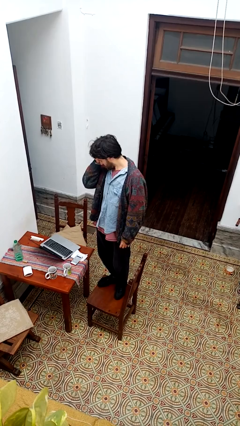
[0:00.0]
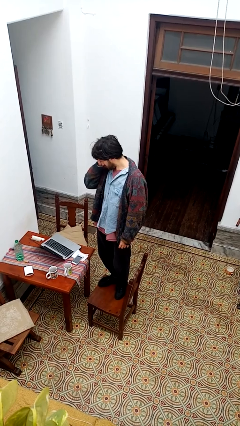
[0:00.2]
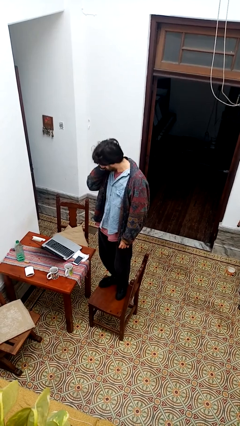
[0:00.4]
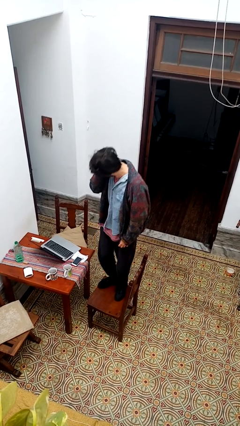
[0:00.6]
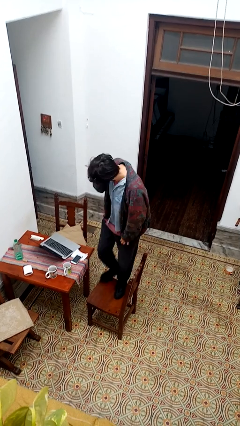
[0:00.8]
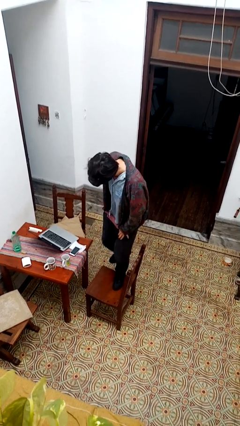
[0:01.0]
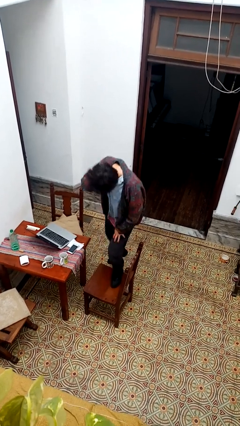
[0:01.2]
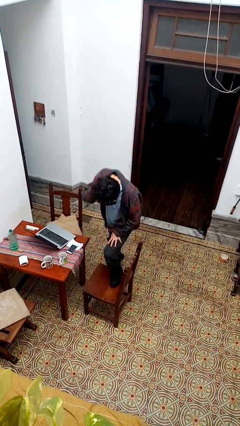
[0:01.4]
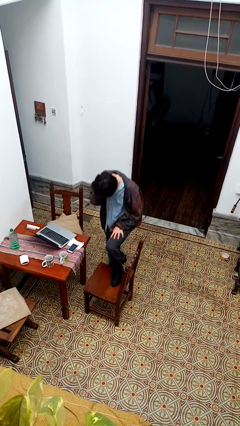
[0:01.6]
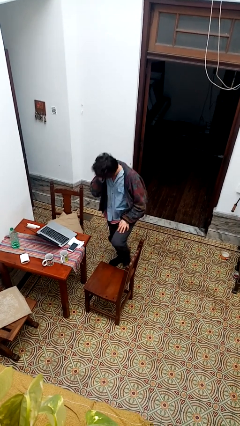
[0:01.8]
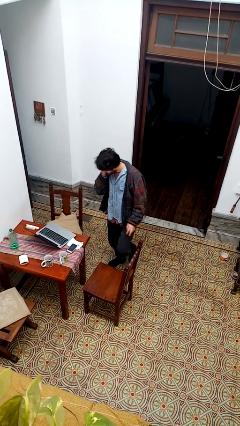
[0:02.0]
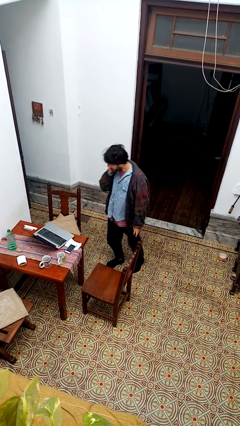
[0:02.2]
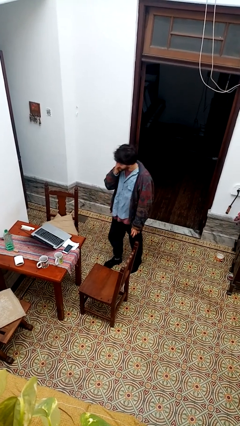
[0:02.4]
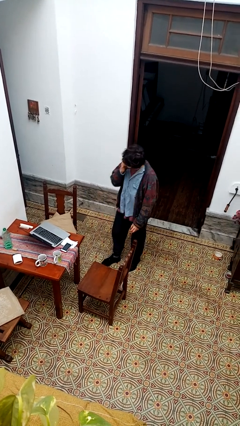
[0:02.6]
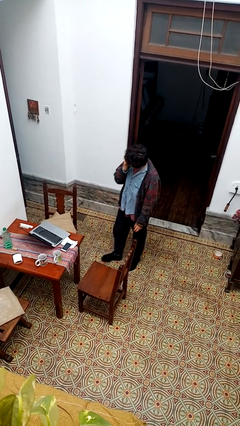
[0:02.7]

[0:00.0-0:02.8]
person climbs off chair

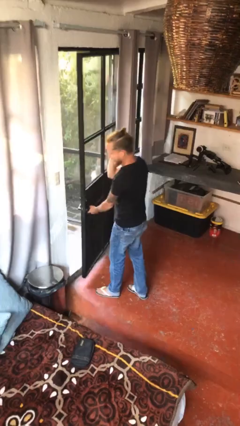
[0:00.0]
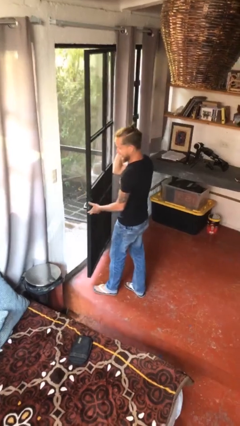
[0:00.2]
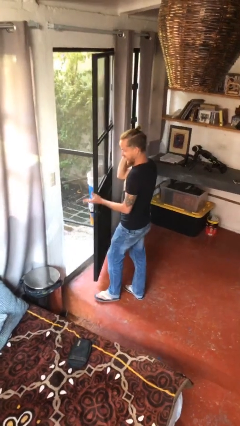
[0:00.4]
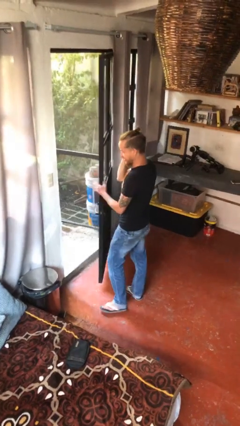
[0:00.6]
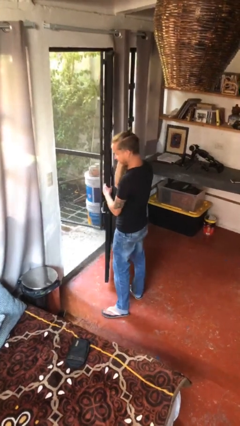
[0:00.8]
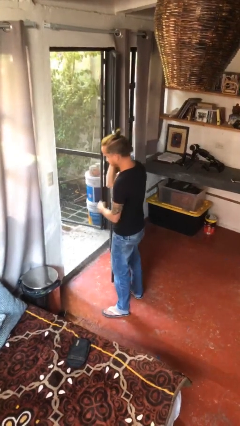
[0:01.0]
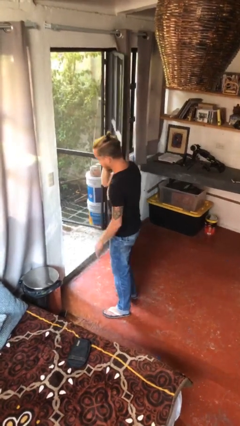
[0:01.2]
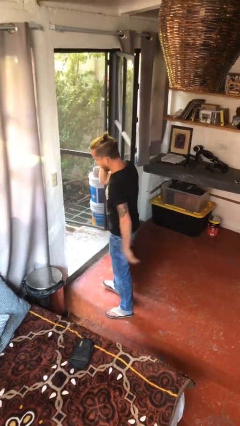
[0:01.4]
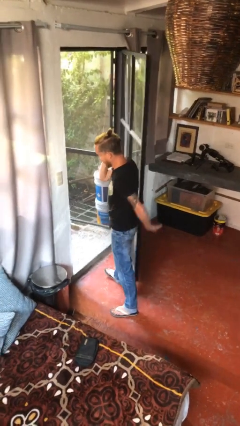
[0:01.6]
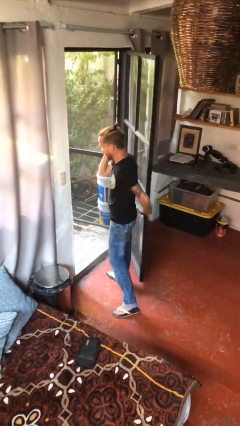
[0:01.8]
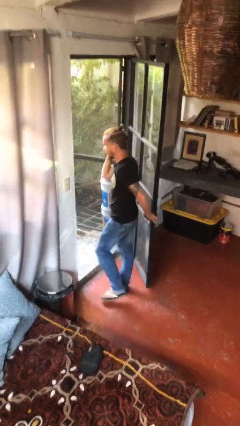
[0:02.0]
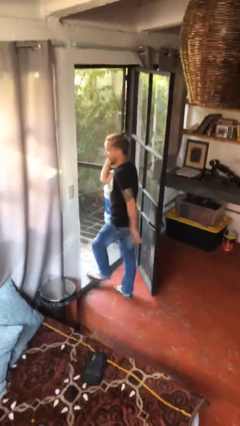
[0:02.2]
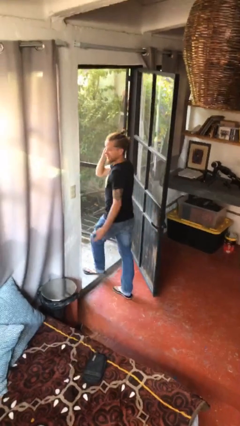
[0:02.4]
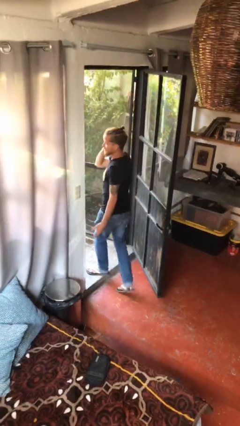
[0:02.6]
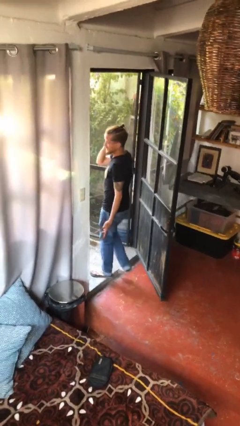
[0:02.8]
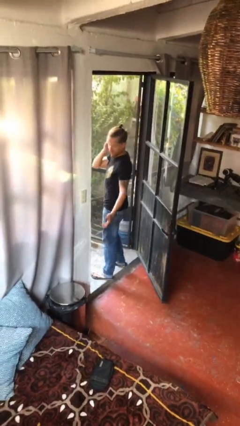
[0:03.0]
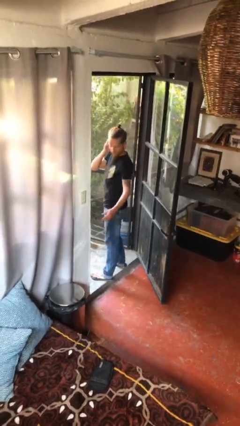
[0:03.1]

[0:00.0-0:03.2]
person exits scene through structure

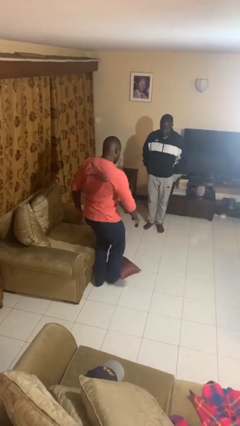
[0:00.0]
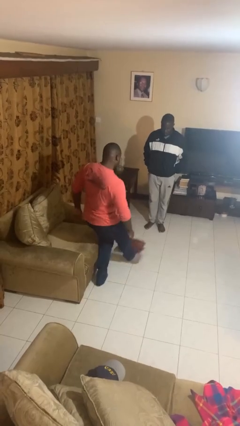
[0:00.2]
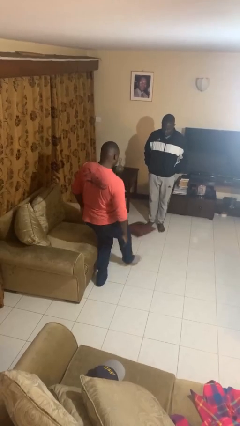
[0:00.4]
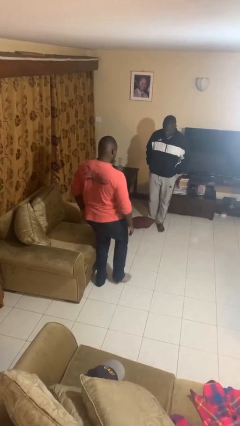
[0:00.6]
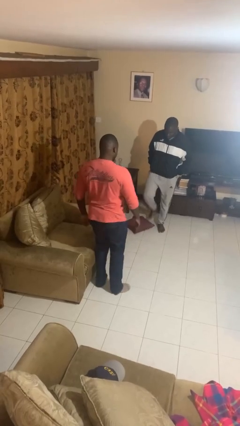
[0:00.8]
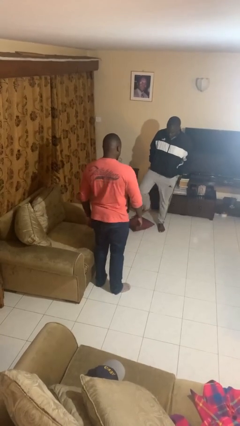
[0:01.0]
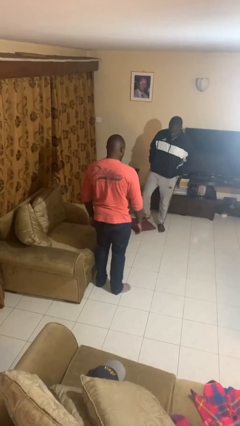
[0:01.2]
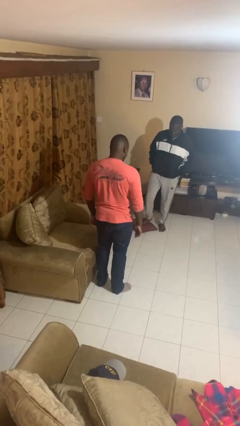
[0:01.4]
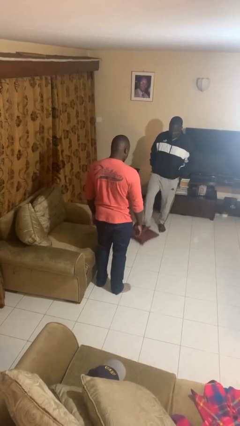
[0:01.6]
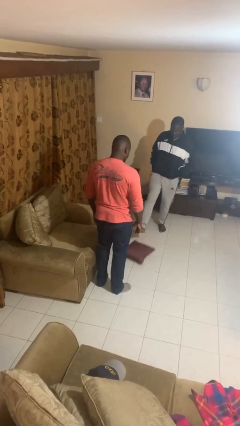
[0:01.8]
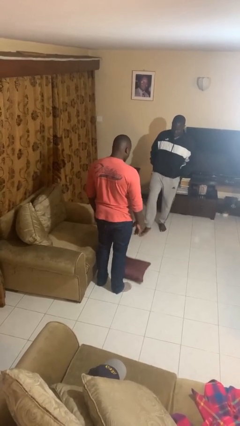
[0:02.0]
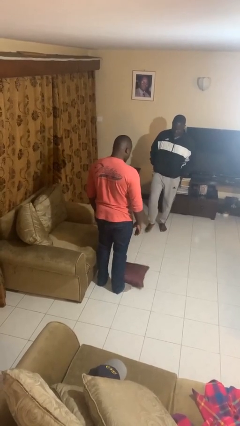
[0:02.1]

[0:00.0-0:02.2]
person kicks object to person

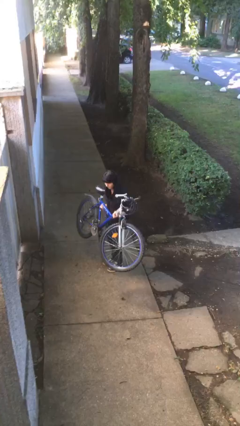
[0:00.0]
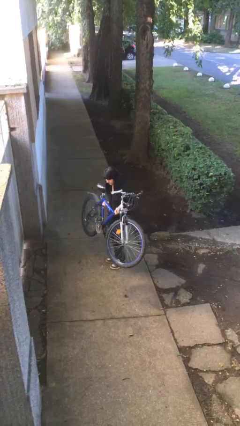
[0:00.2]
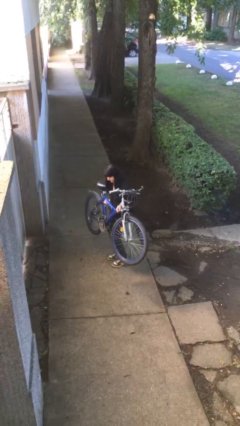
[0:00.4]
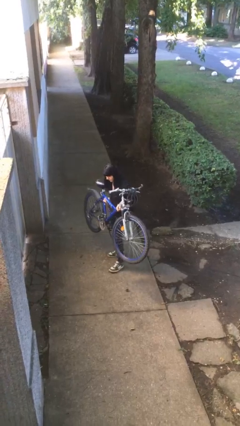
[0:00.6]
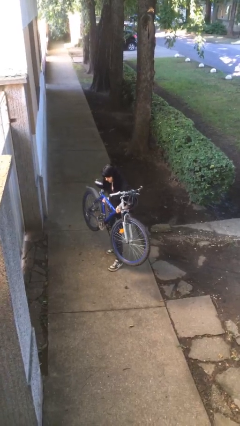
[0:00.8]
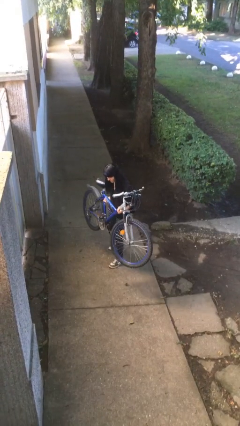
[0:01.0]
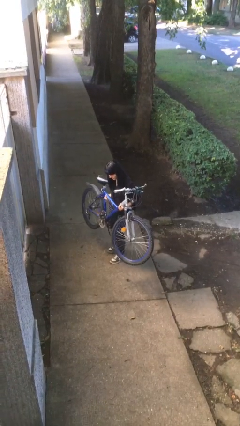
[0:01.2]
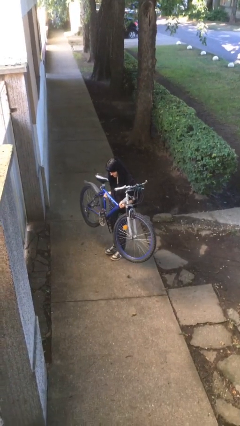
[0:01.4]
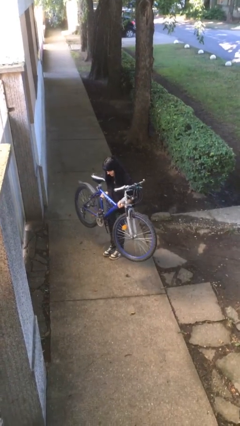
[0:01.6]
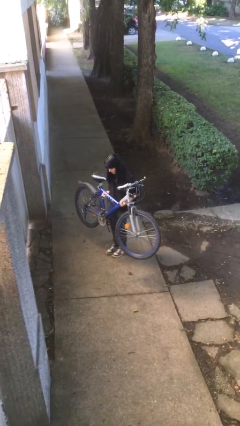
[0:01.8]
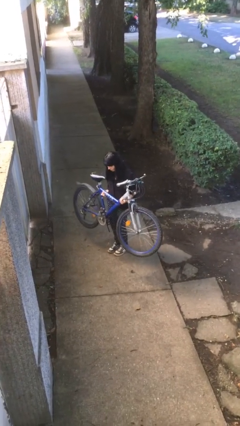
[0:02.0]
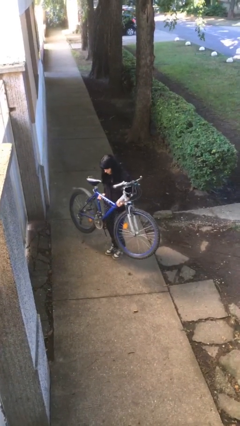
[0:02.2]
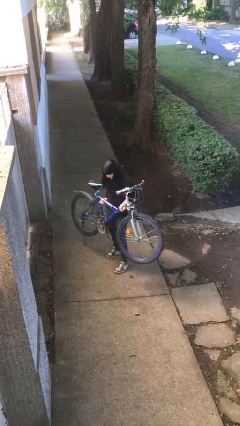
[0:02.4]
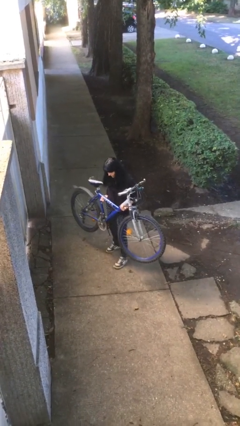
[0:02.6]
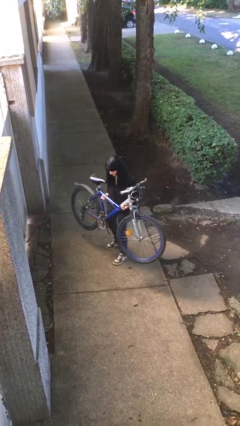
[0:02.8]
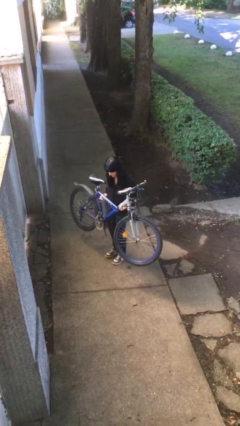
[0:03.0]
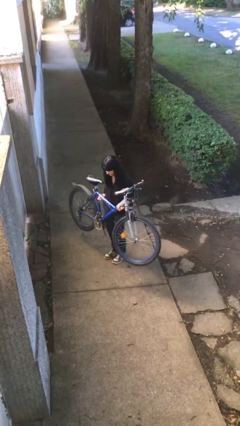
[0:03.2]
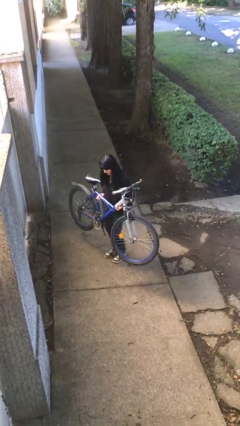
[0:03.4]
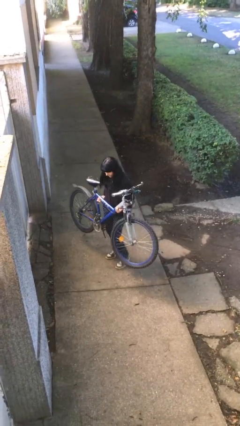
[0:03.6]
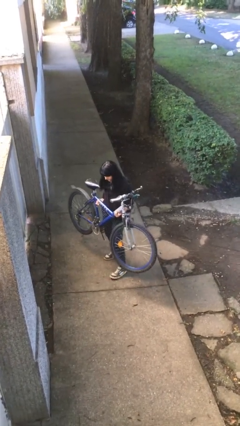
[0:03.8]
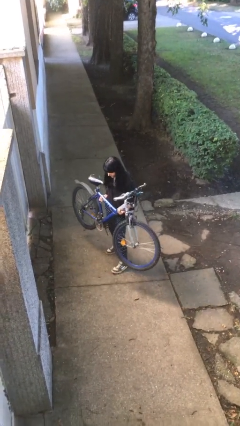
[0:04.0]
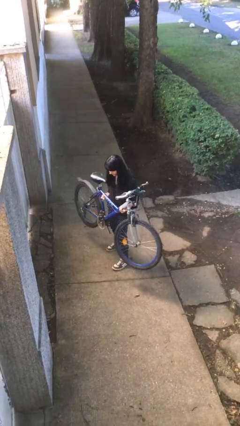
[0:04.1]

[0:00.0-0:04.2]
person carries heavy object

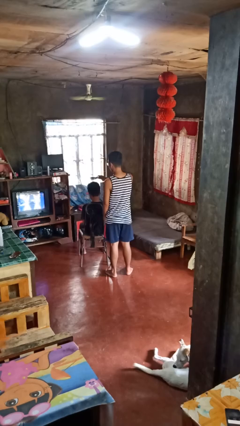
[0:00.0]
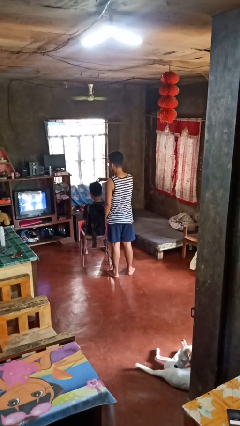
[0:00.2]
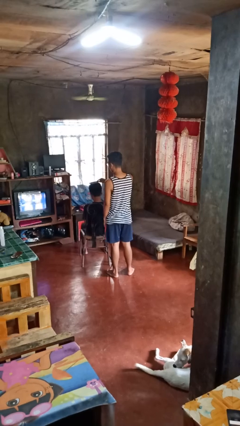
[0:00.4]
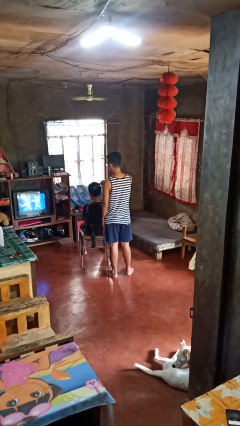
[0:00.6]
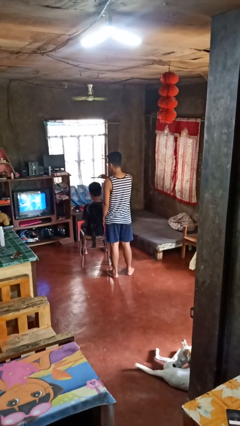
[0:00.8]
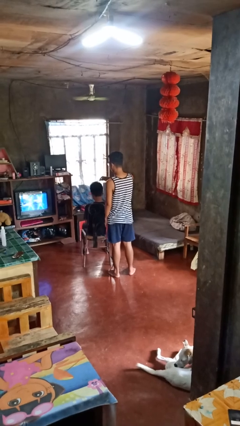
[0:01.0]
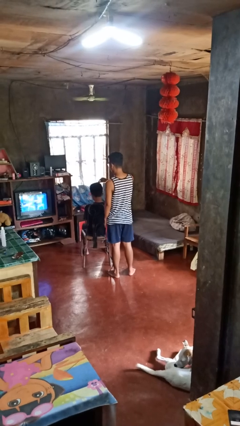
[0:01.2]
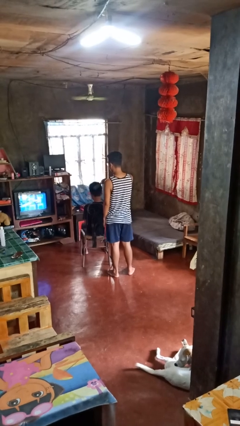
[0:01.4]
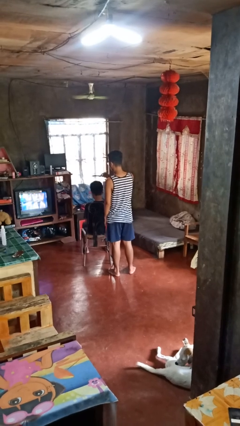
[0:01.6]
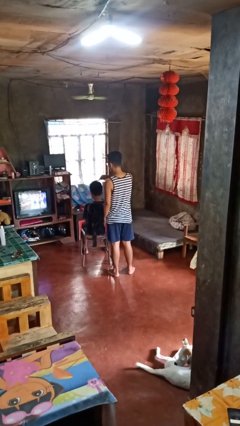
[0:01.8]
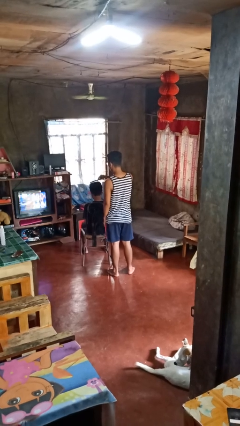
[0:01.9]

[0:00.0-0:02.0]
person brushes hair of person

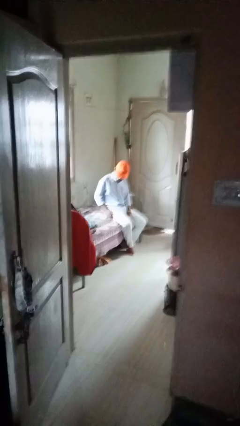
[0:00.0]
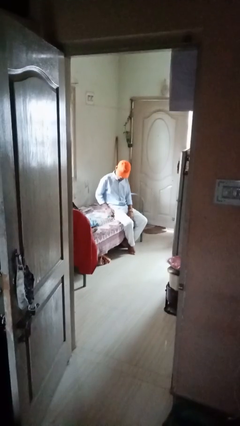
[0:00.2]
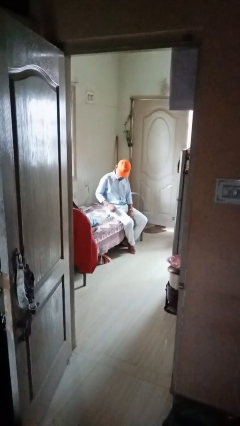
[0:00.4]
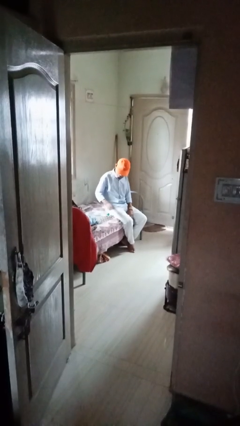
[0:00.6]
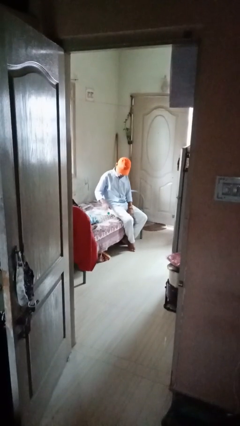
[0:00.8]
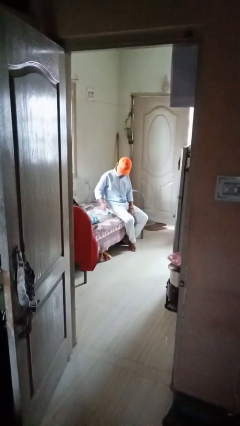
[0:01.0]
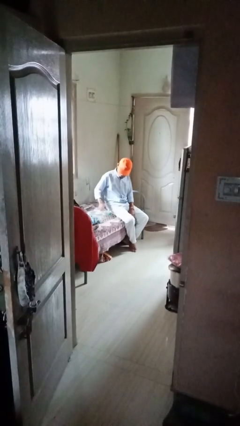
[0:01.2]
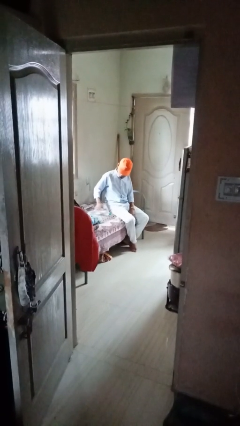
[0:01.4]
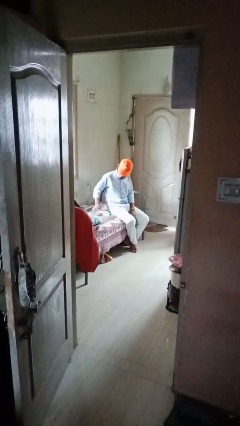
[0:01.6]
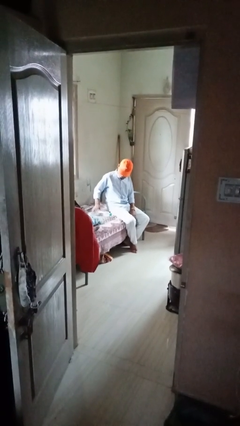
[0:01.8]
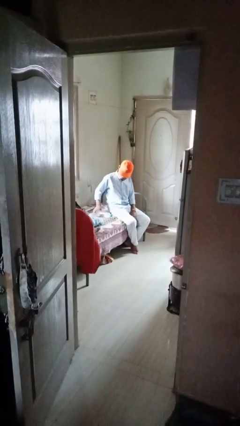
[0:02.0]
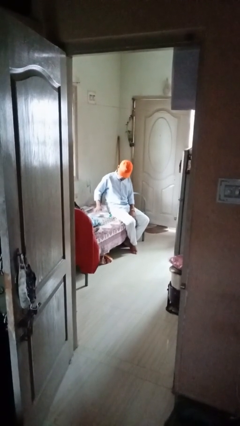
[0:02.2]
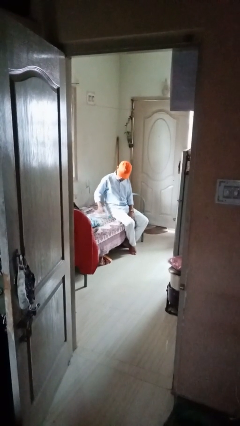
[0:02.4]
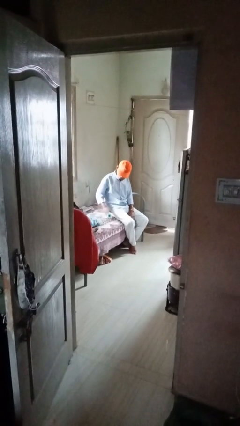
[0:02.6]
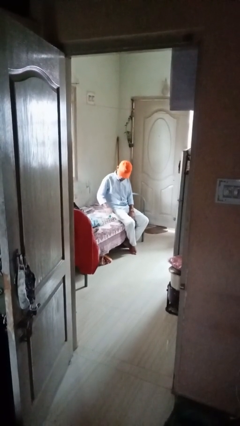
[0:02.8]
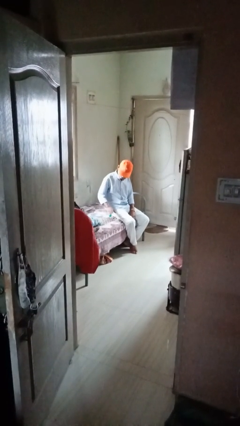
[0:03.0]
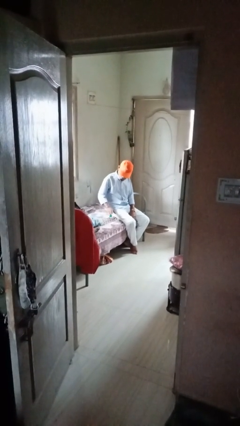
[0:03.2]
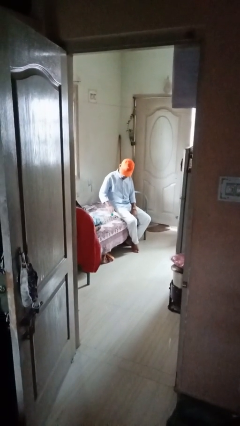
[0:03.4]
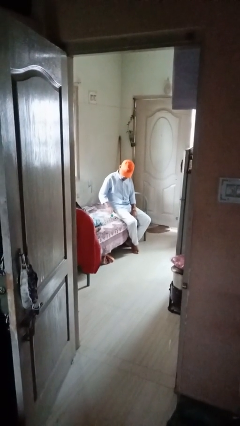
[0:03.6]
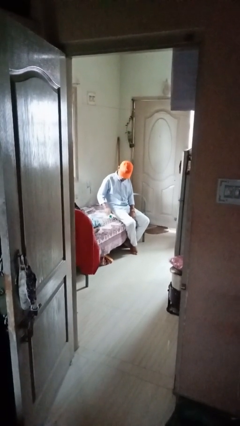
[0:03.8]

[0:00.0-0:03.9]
person waves hand over object
